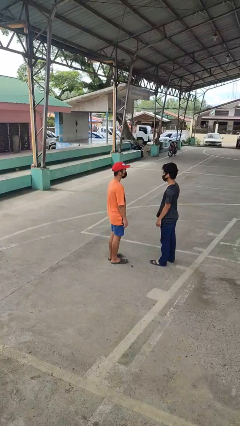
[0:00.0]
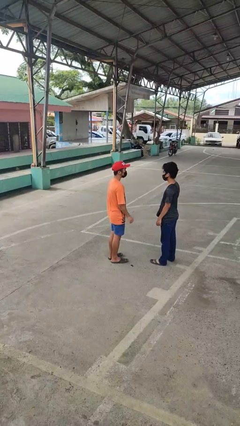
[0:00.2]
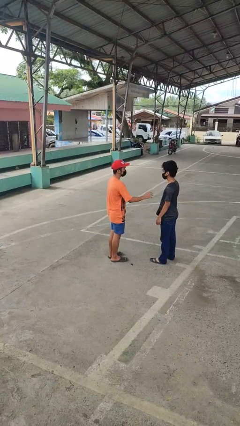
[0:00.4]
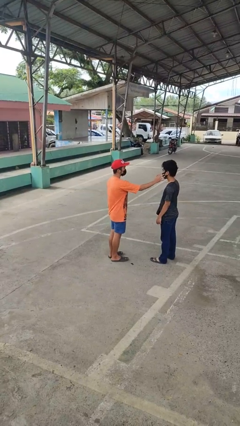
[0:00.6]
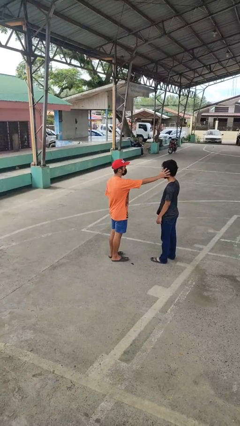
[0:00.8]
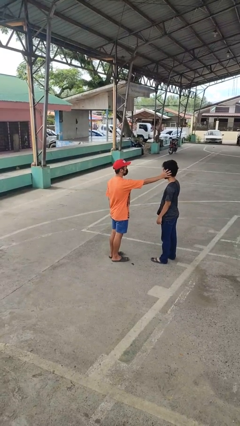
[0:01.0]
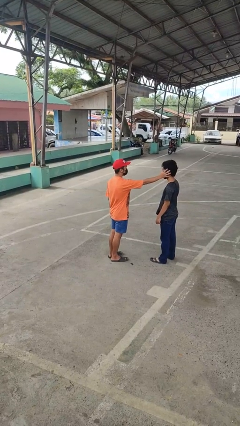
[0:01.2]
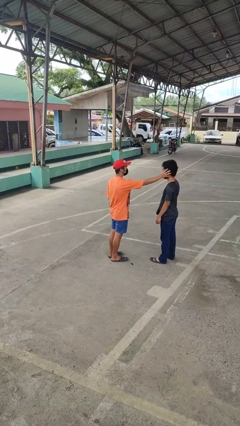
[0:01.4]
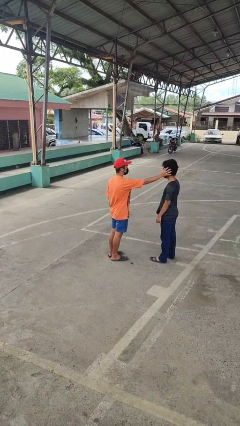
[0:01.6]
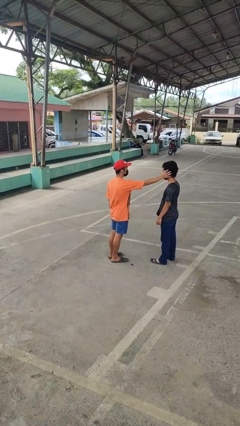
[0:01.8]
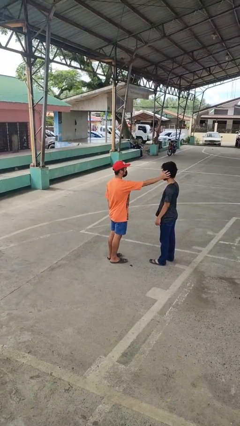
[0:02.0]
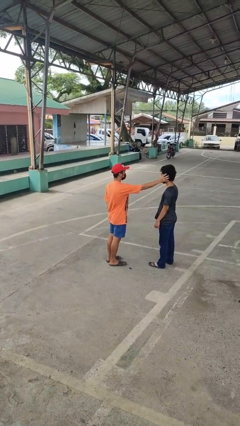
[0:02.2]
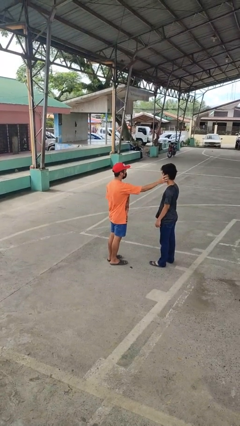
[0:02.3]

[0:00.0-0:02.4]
person touches face of person

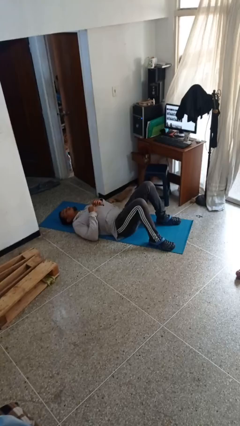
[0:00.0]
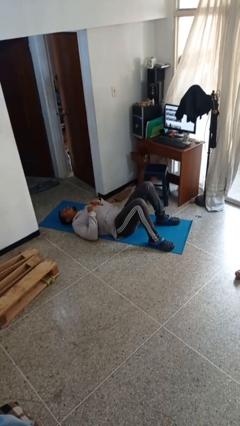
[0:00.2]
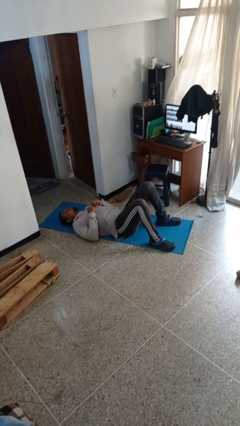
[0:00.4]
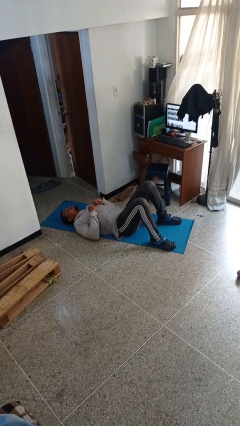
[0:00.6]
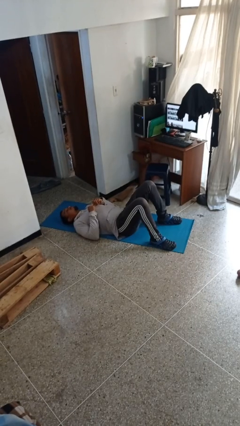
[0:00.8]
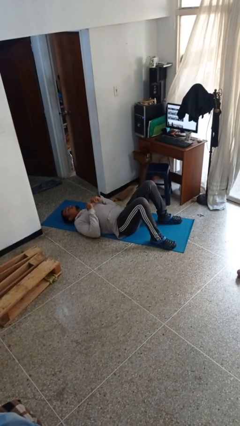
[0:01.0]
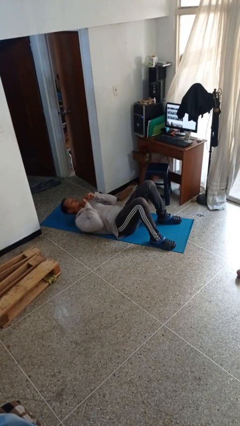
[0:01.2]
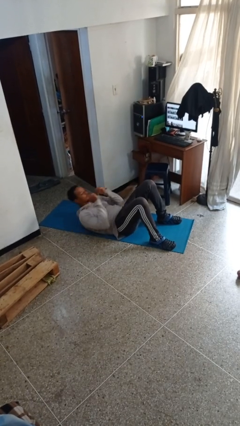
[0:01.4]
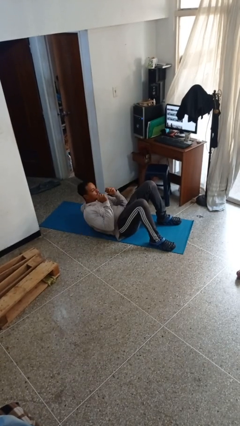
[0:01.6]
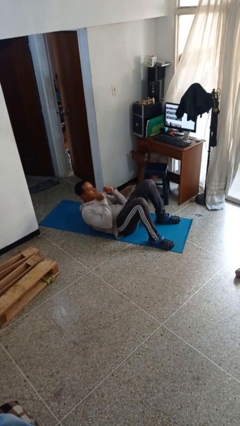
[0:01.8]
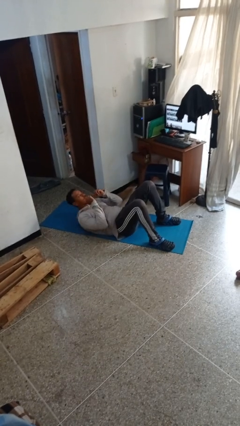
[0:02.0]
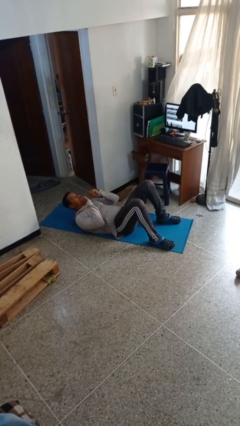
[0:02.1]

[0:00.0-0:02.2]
person exercises with situp

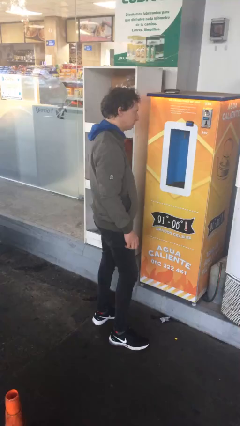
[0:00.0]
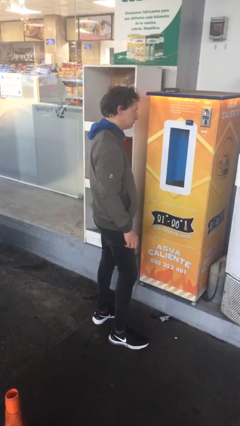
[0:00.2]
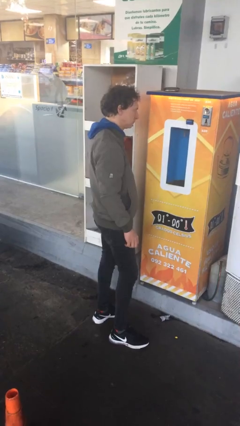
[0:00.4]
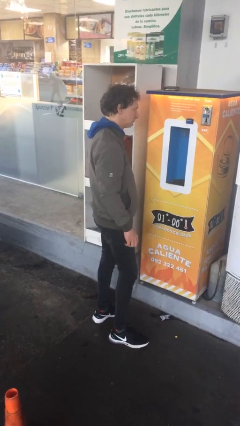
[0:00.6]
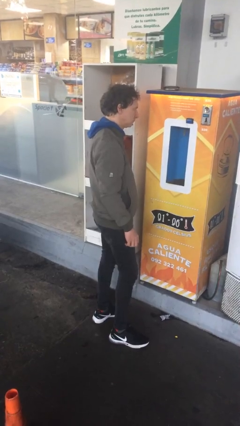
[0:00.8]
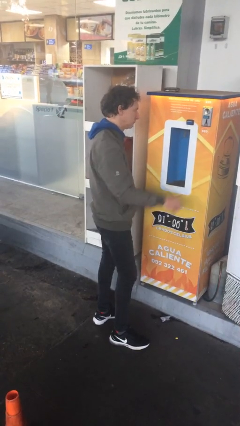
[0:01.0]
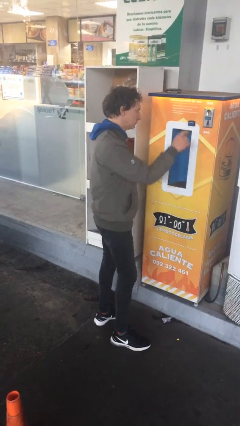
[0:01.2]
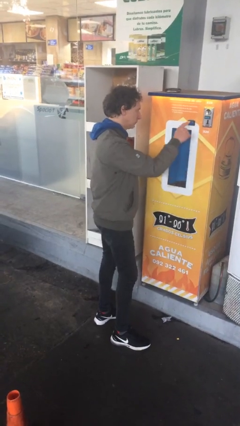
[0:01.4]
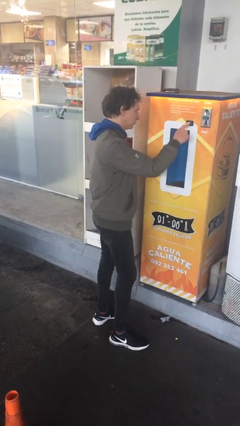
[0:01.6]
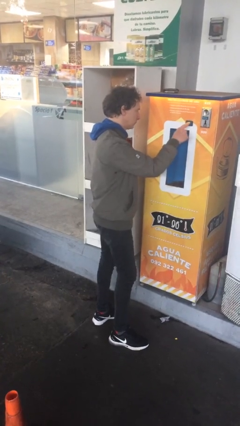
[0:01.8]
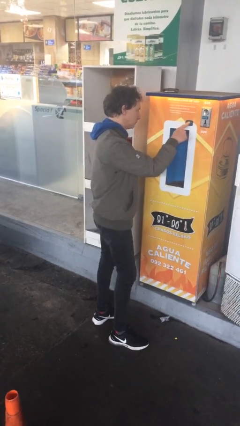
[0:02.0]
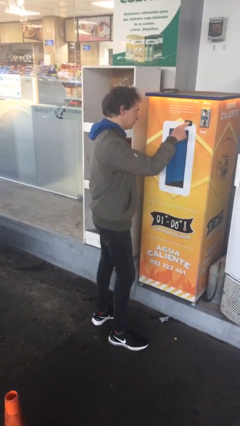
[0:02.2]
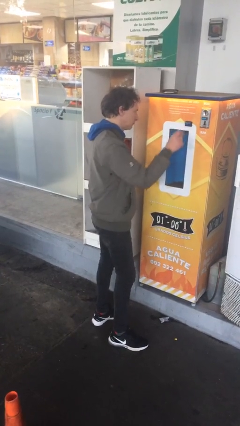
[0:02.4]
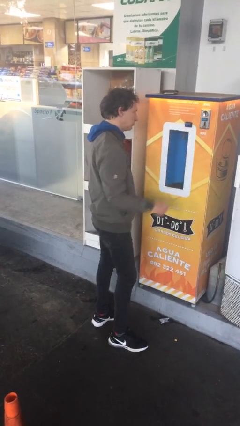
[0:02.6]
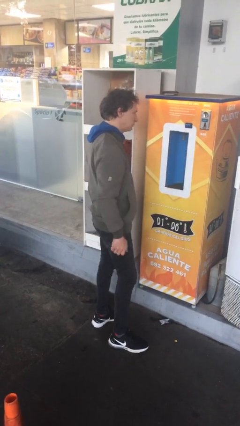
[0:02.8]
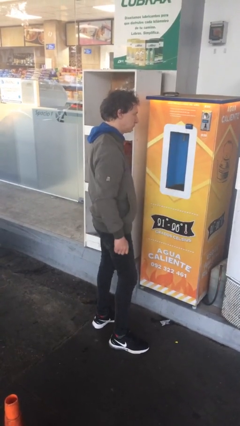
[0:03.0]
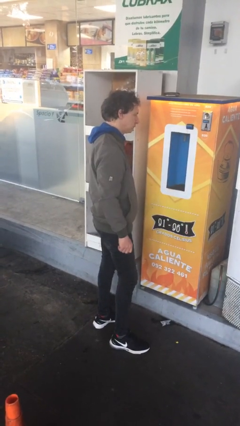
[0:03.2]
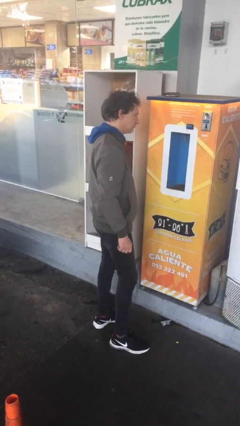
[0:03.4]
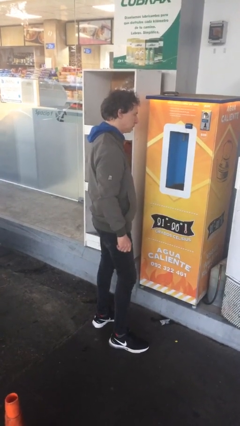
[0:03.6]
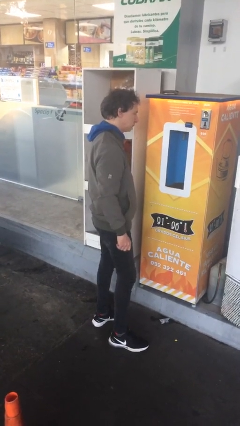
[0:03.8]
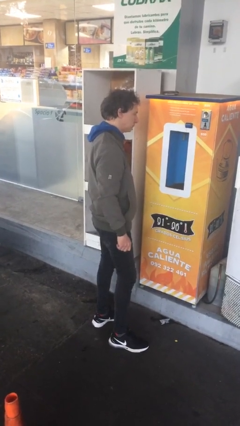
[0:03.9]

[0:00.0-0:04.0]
person purchases from machine

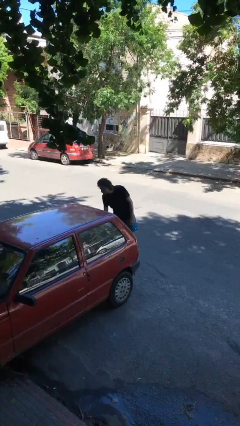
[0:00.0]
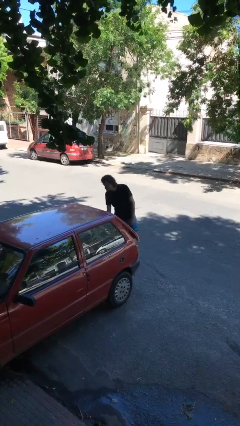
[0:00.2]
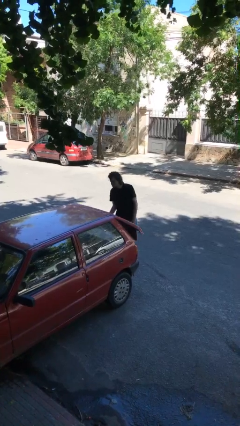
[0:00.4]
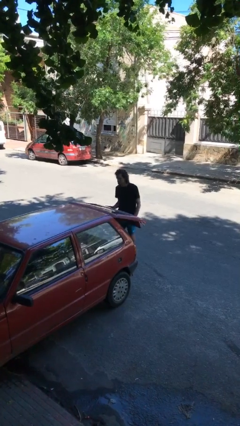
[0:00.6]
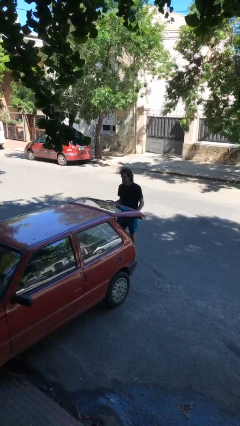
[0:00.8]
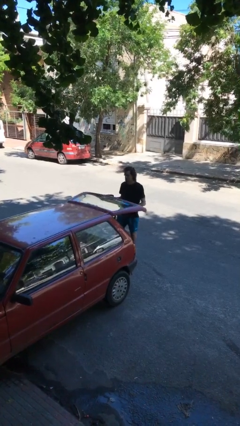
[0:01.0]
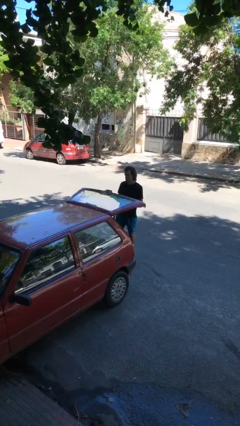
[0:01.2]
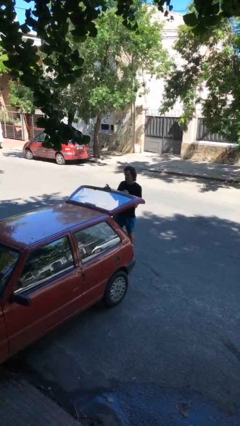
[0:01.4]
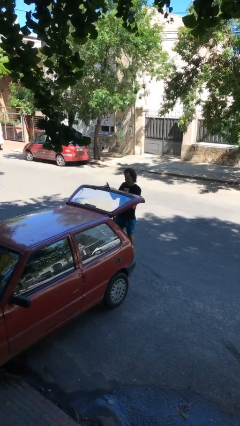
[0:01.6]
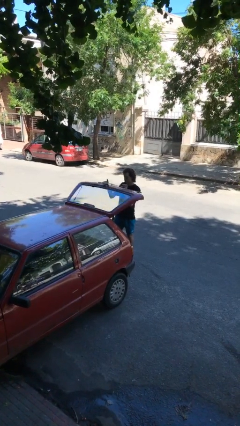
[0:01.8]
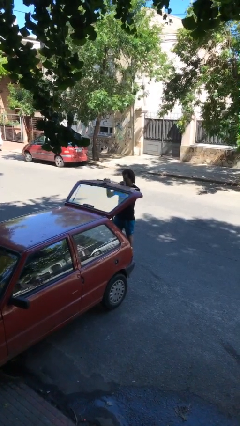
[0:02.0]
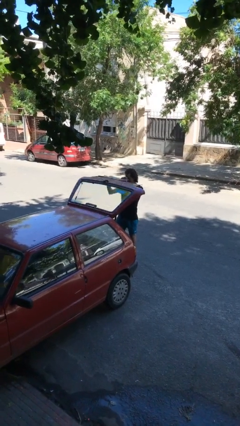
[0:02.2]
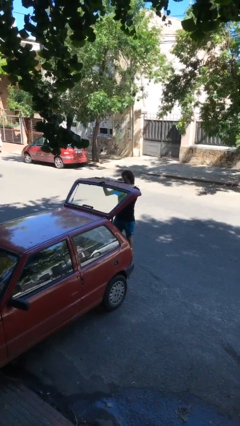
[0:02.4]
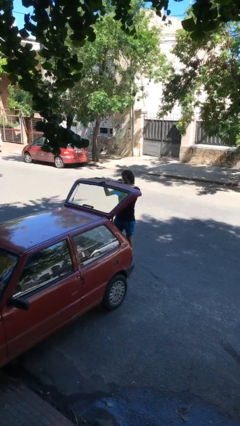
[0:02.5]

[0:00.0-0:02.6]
person opens car trunk

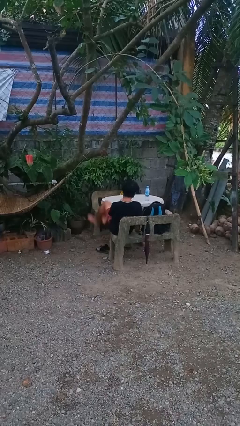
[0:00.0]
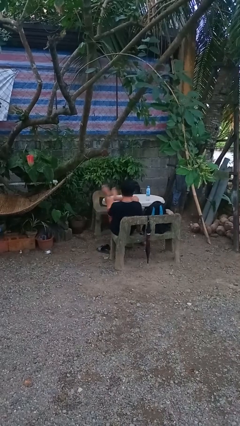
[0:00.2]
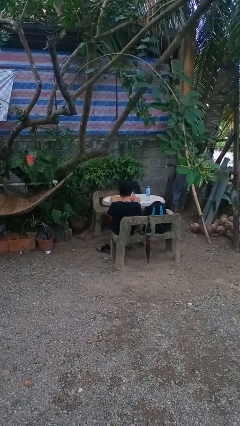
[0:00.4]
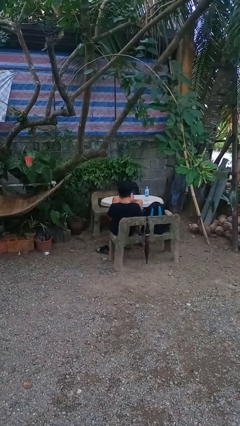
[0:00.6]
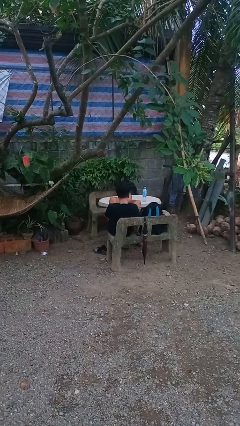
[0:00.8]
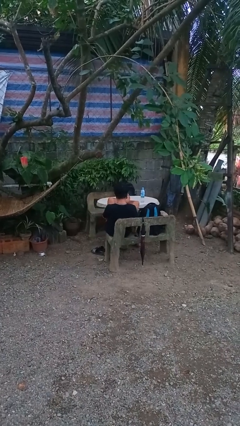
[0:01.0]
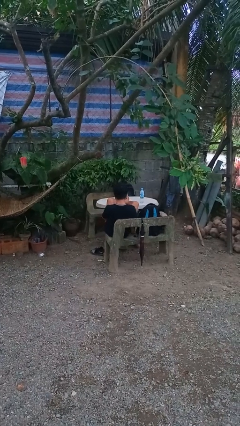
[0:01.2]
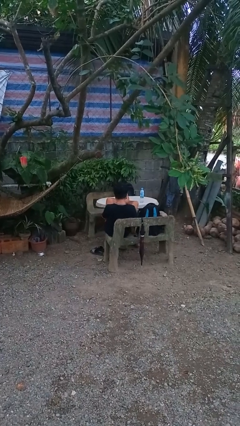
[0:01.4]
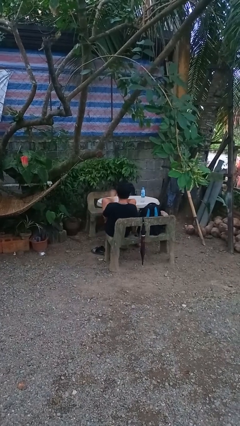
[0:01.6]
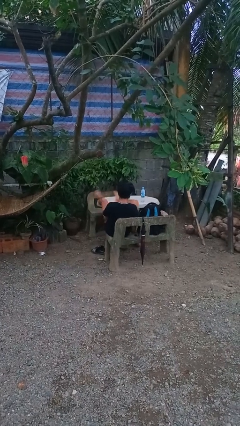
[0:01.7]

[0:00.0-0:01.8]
person puts feet up

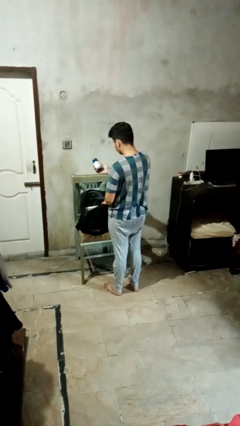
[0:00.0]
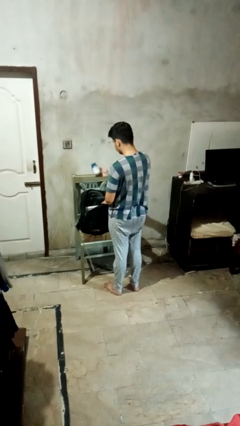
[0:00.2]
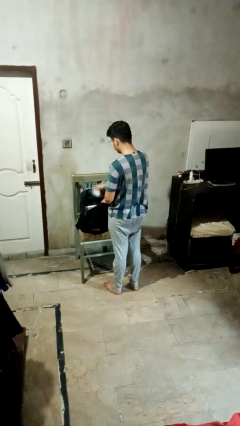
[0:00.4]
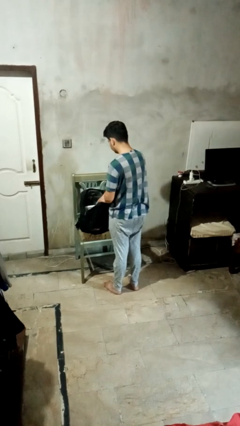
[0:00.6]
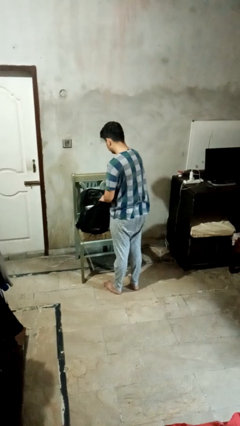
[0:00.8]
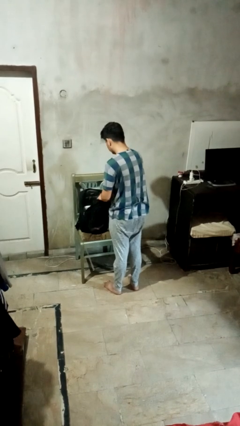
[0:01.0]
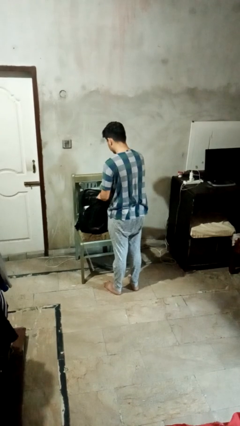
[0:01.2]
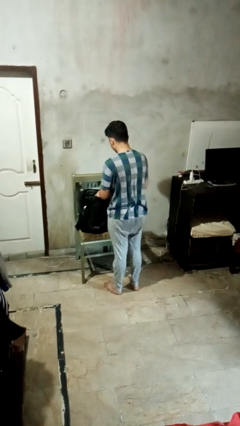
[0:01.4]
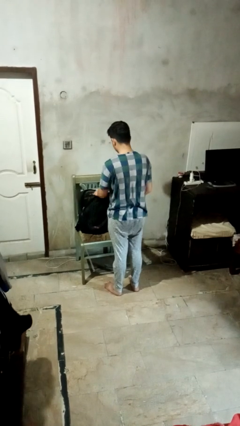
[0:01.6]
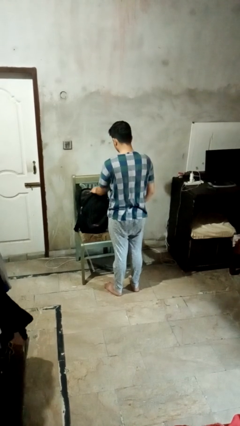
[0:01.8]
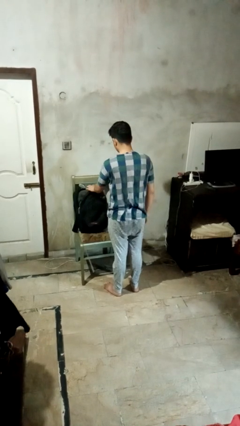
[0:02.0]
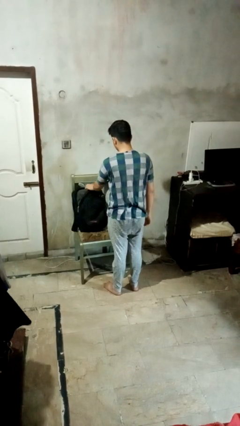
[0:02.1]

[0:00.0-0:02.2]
person puts object into backpack

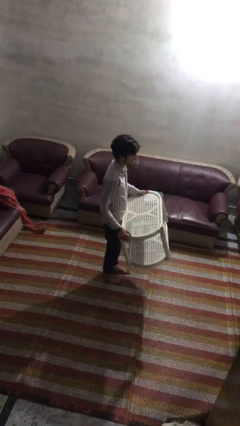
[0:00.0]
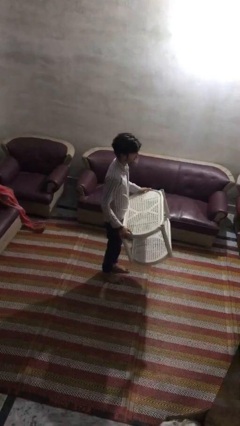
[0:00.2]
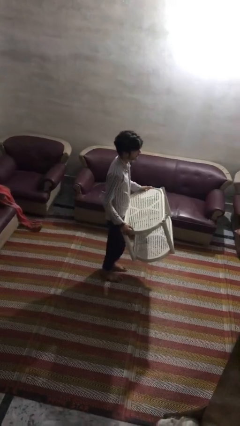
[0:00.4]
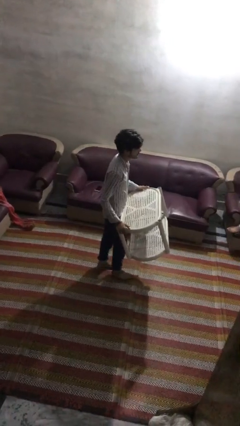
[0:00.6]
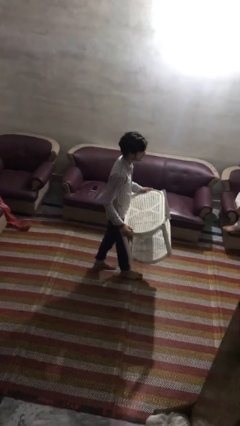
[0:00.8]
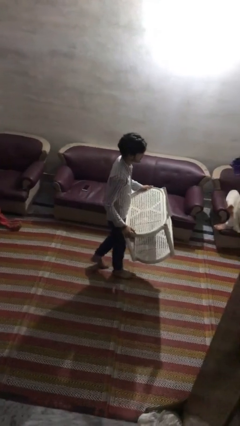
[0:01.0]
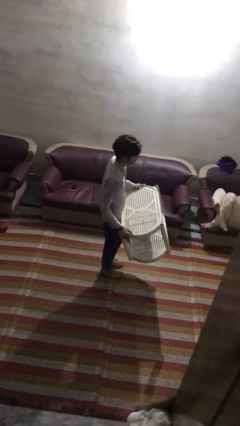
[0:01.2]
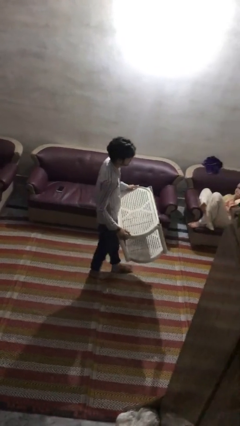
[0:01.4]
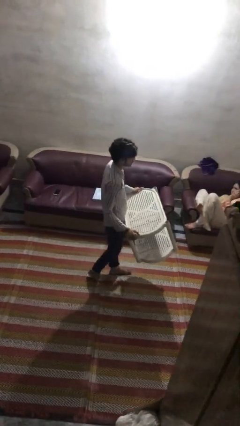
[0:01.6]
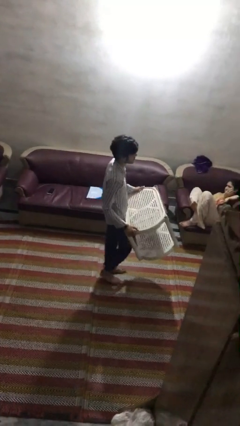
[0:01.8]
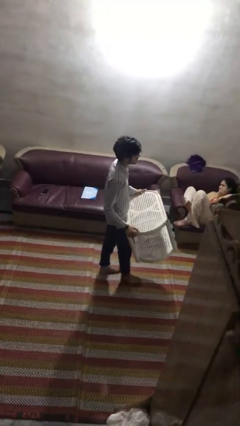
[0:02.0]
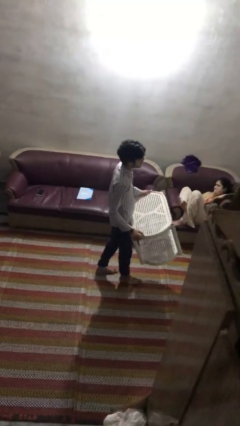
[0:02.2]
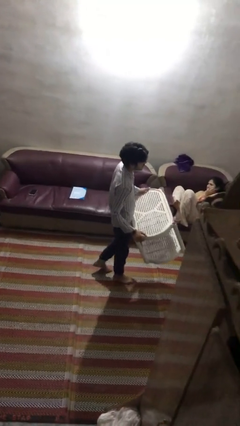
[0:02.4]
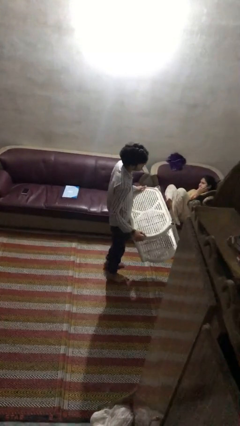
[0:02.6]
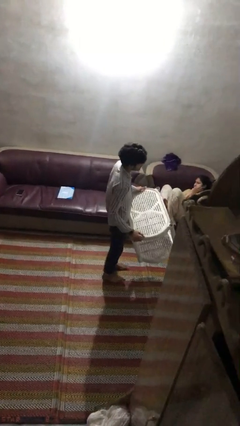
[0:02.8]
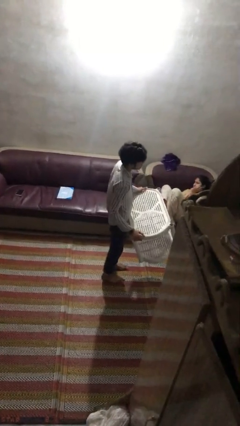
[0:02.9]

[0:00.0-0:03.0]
person carries furniture
